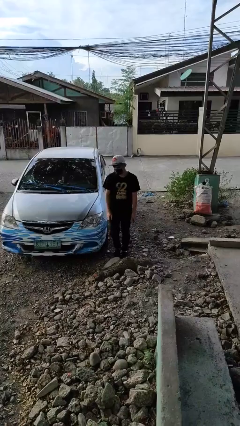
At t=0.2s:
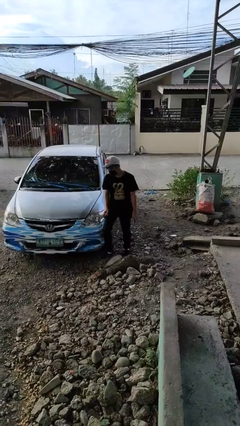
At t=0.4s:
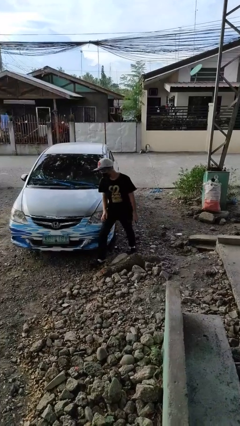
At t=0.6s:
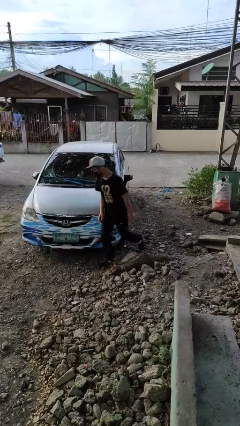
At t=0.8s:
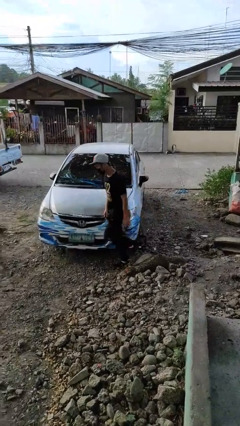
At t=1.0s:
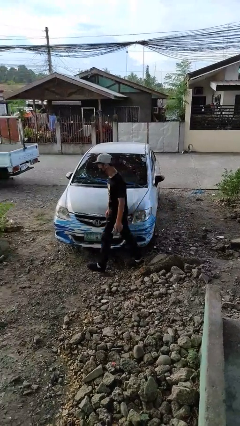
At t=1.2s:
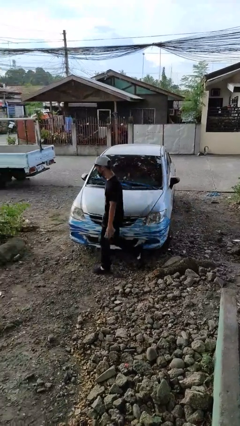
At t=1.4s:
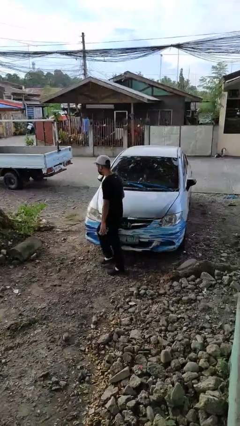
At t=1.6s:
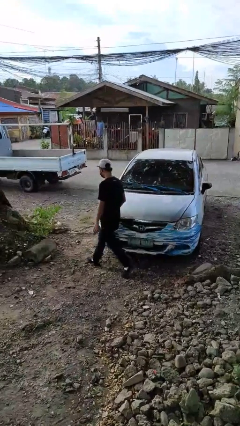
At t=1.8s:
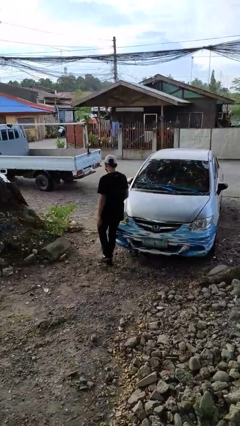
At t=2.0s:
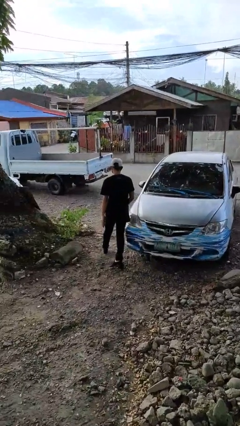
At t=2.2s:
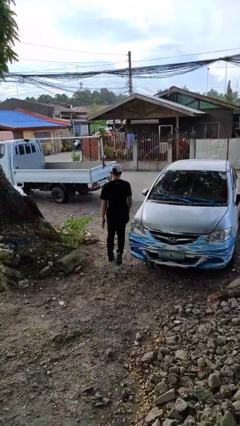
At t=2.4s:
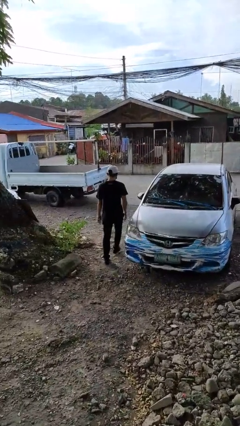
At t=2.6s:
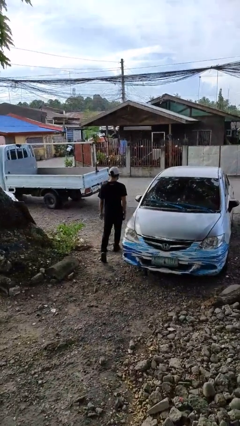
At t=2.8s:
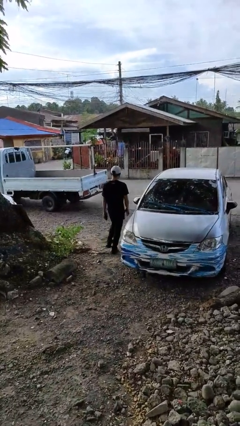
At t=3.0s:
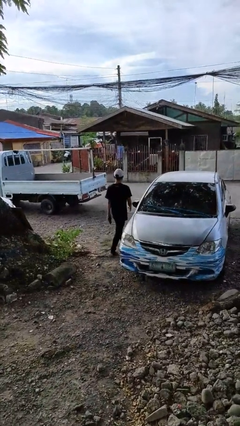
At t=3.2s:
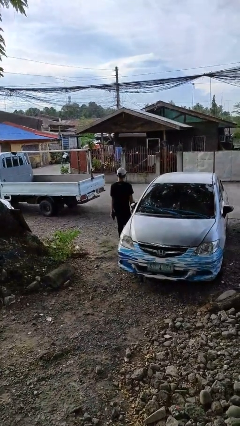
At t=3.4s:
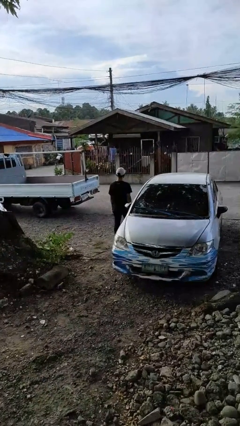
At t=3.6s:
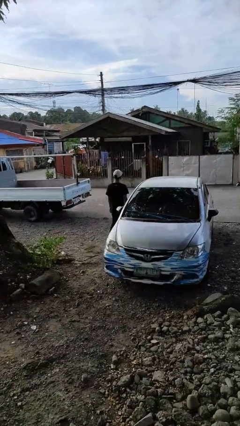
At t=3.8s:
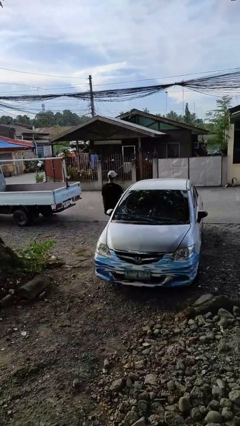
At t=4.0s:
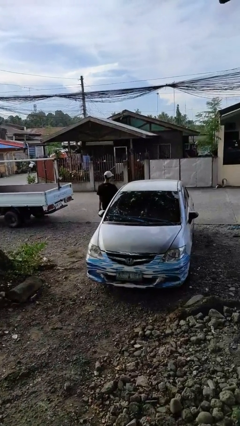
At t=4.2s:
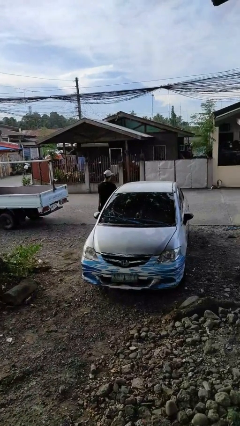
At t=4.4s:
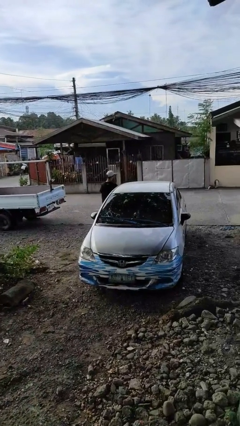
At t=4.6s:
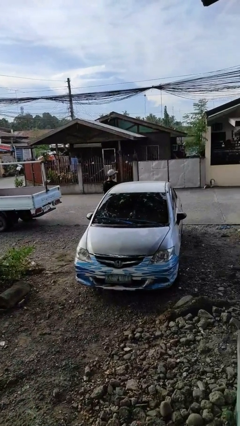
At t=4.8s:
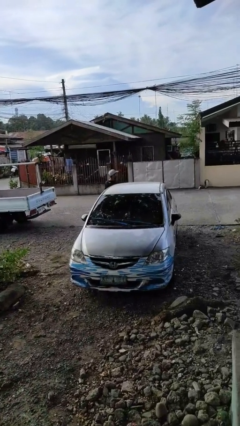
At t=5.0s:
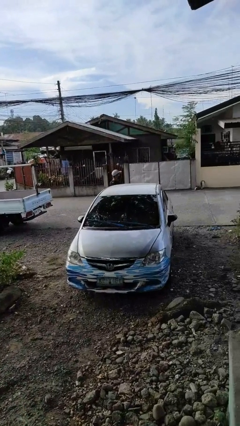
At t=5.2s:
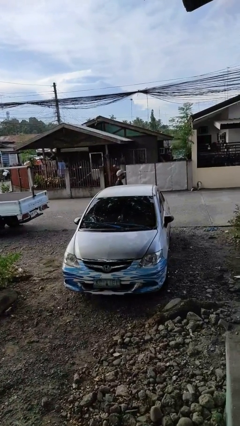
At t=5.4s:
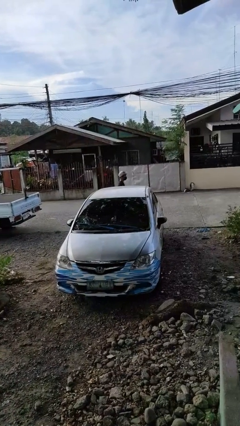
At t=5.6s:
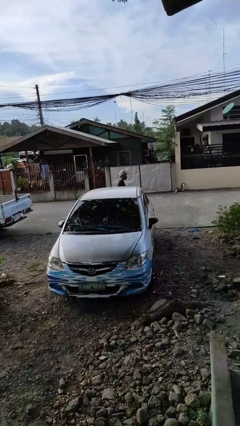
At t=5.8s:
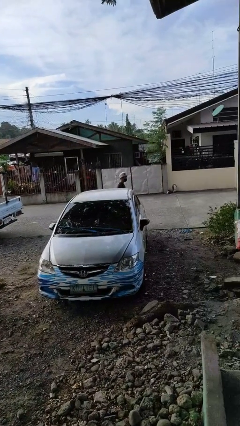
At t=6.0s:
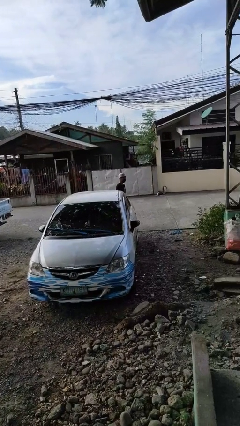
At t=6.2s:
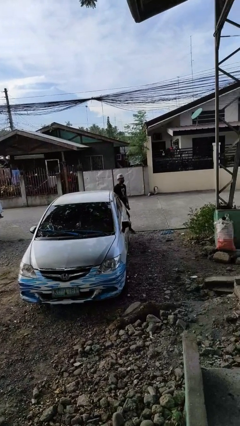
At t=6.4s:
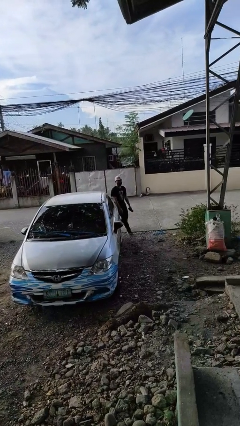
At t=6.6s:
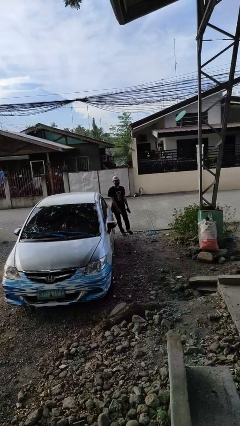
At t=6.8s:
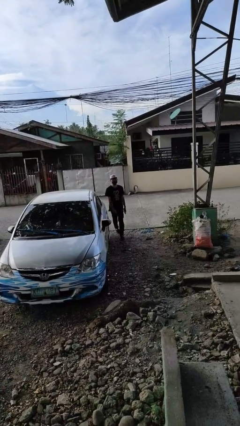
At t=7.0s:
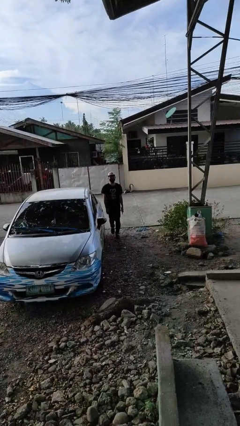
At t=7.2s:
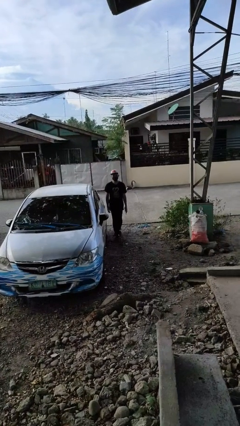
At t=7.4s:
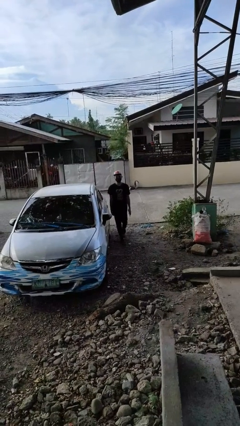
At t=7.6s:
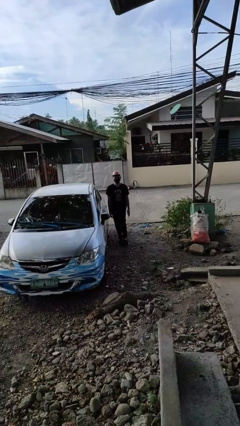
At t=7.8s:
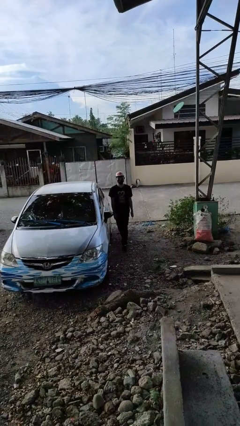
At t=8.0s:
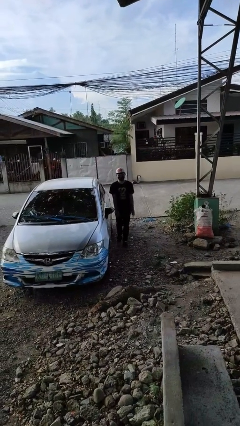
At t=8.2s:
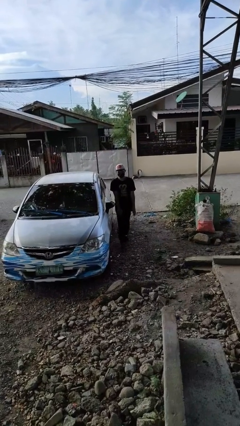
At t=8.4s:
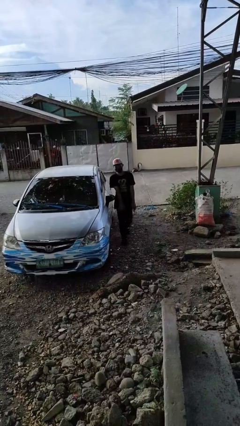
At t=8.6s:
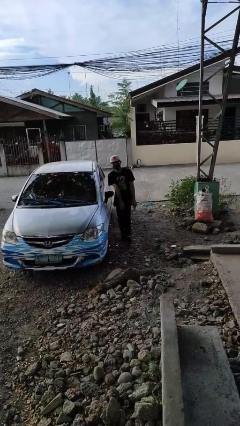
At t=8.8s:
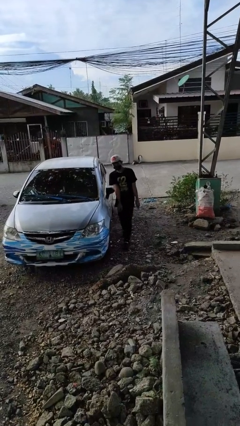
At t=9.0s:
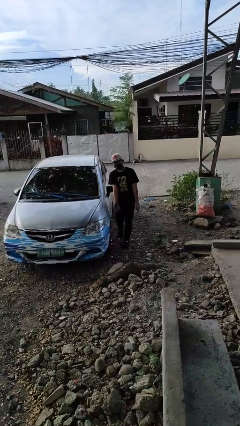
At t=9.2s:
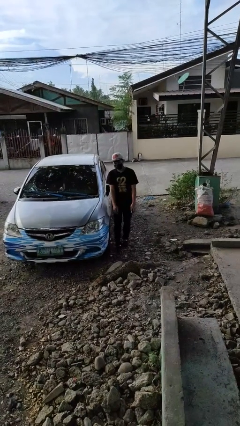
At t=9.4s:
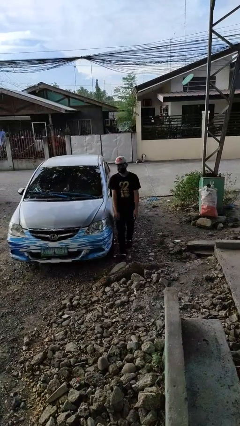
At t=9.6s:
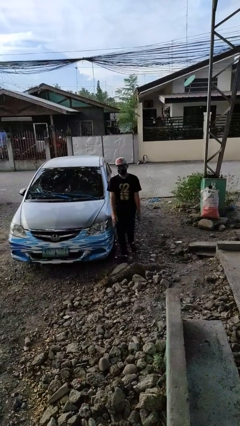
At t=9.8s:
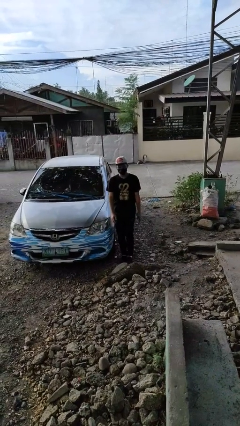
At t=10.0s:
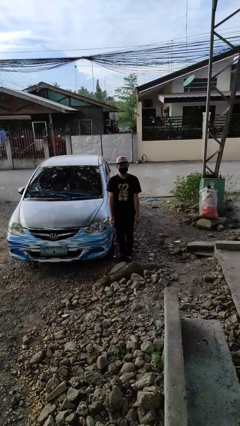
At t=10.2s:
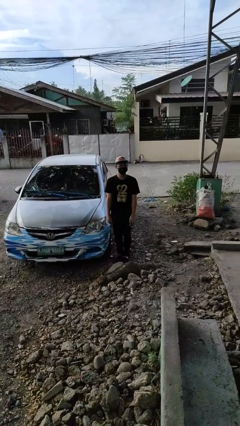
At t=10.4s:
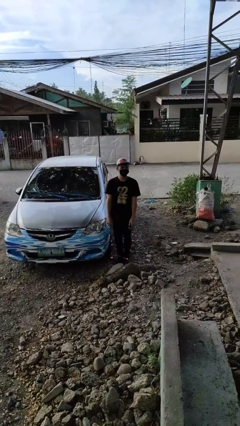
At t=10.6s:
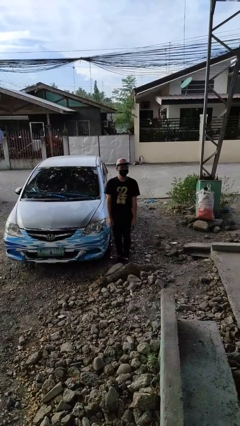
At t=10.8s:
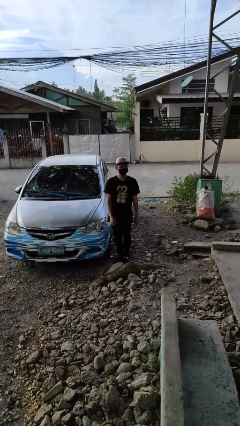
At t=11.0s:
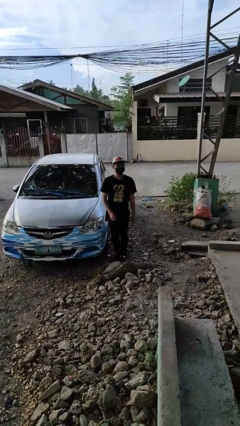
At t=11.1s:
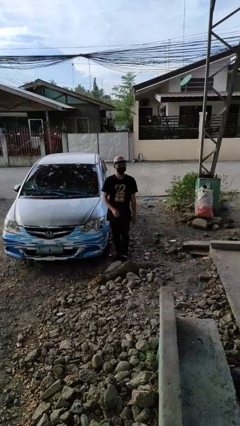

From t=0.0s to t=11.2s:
person walks around car

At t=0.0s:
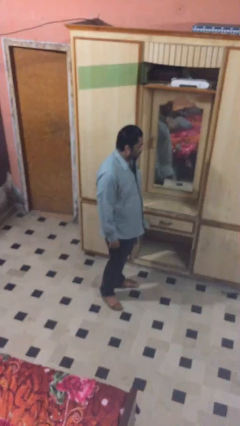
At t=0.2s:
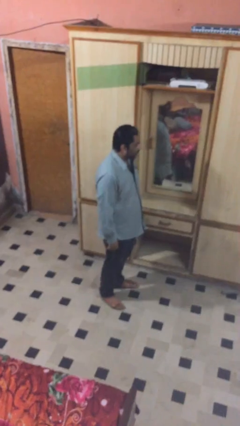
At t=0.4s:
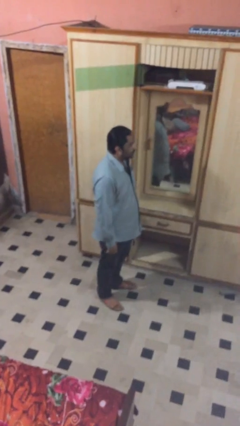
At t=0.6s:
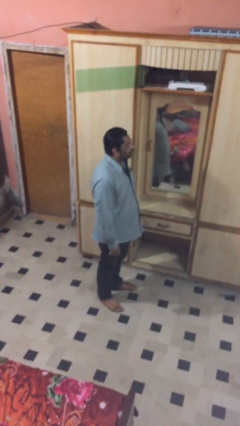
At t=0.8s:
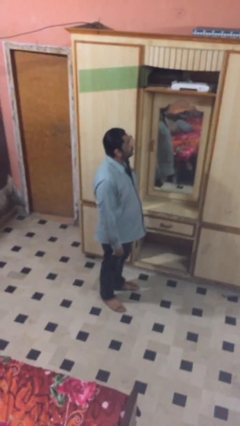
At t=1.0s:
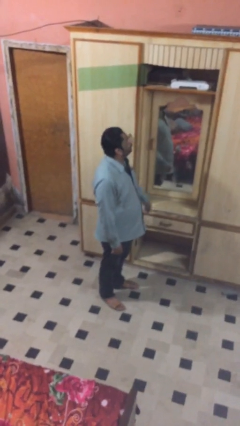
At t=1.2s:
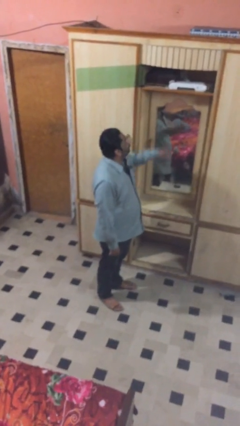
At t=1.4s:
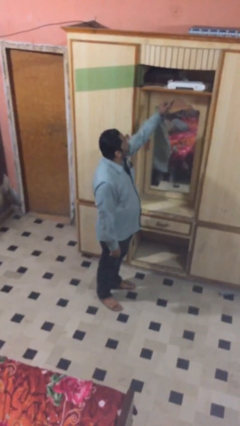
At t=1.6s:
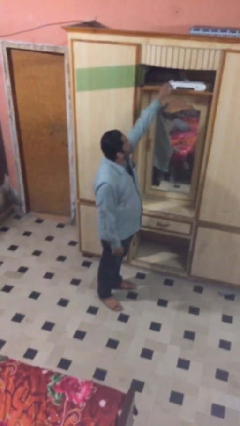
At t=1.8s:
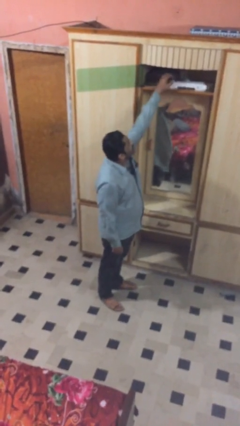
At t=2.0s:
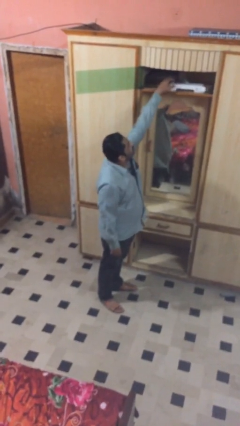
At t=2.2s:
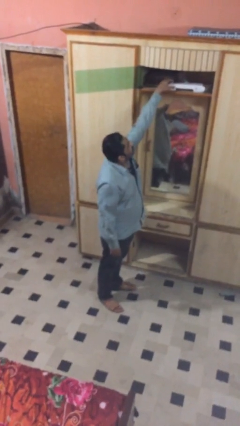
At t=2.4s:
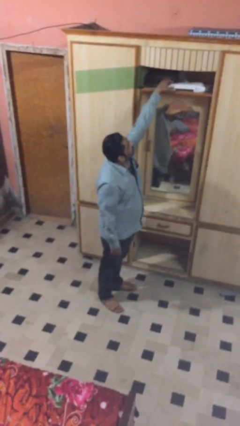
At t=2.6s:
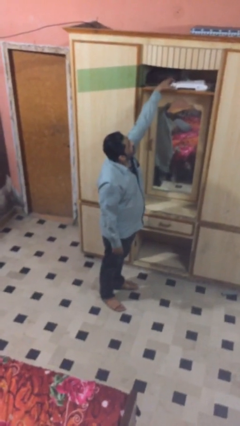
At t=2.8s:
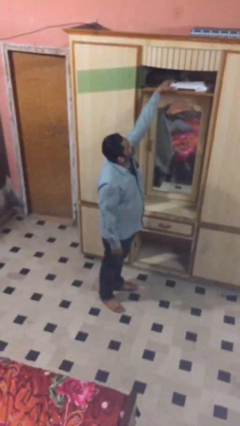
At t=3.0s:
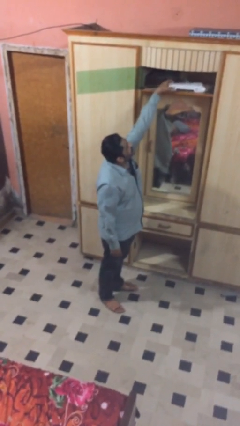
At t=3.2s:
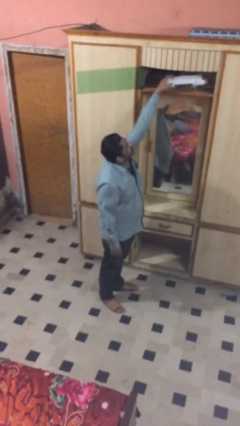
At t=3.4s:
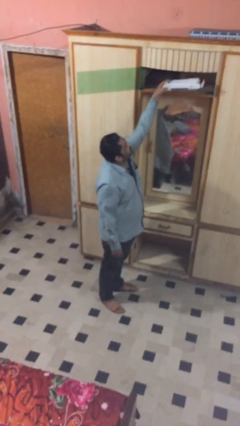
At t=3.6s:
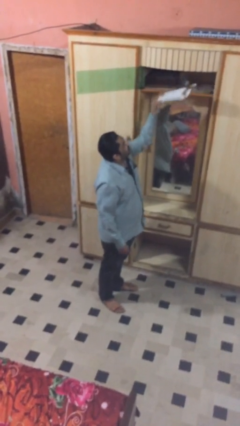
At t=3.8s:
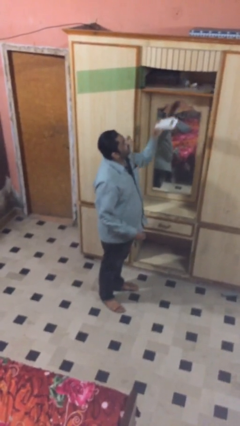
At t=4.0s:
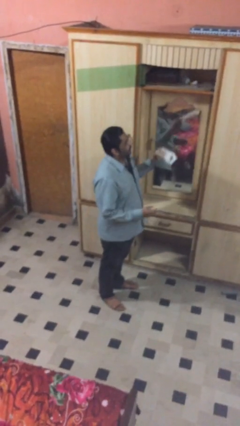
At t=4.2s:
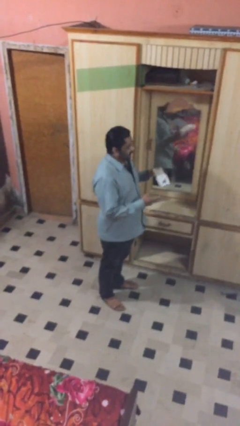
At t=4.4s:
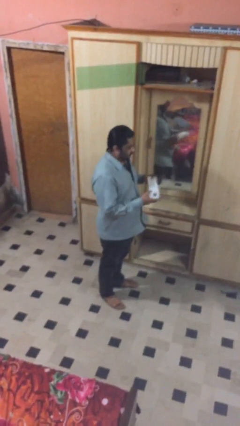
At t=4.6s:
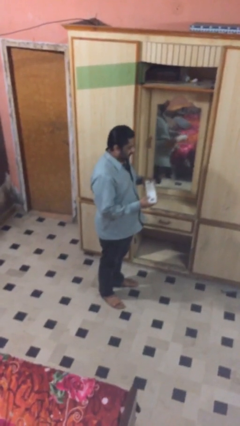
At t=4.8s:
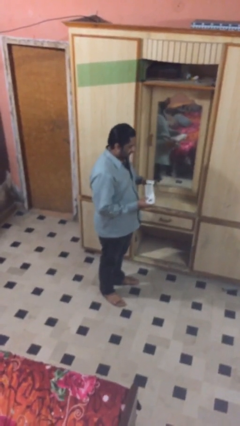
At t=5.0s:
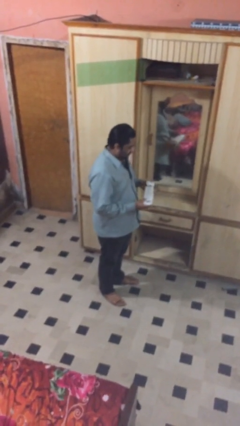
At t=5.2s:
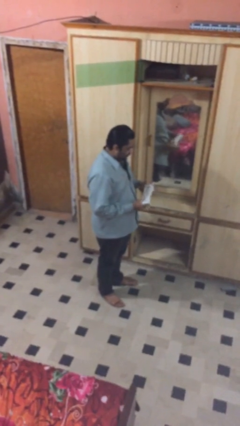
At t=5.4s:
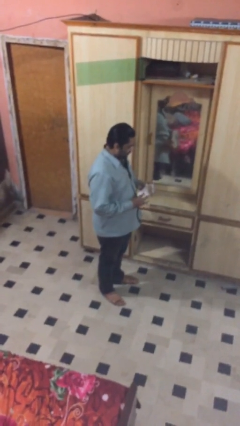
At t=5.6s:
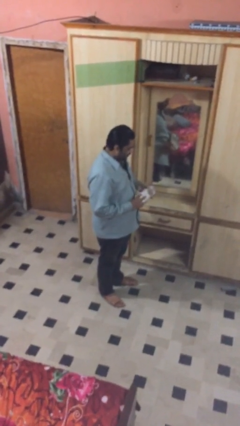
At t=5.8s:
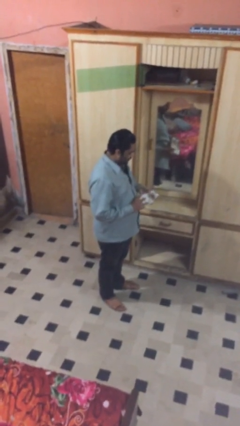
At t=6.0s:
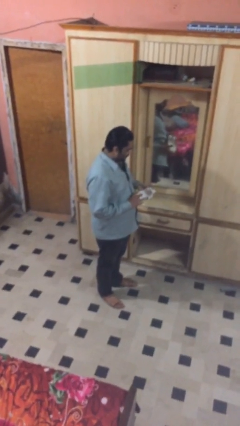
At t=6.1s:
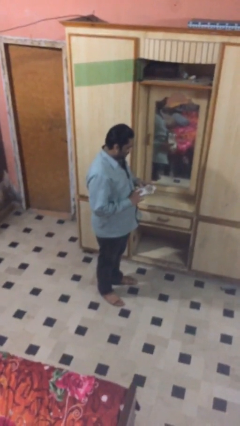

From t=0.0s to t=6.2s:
person picks up object from shelf

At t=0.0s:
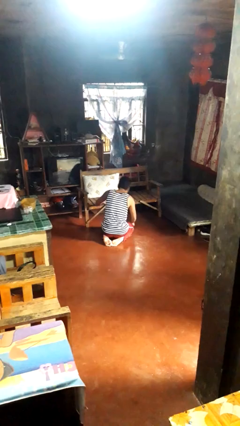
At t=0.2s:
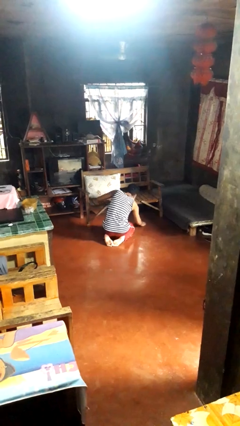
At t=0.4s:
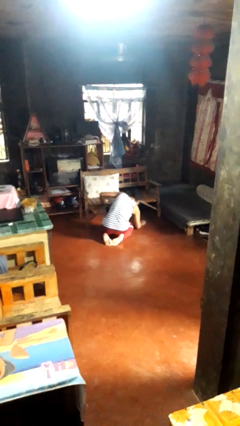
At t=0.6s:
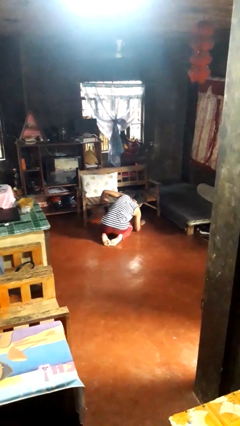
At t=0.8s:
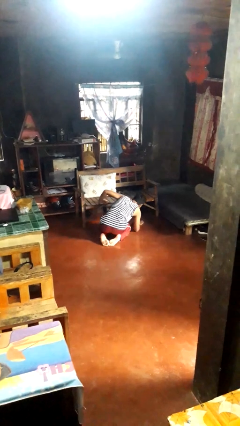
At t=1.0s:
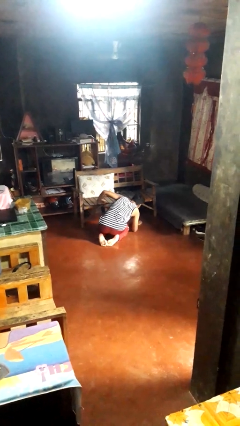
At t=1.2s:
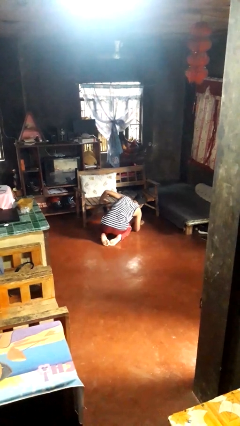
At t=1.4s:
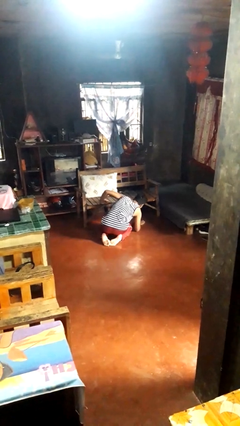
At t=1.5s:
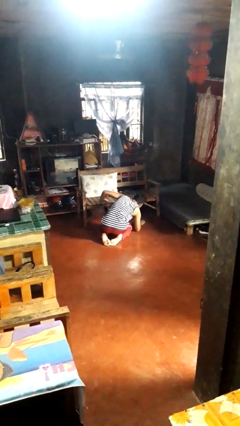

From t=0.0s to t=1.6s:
person searches under couch
